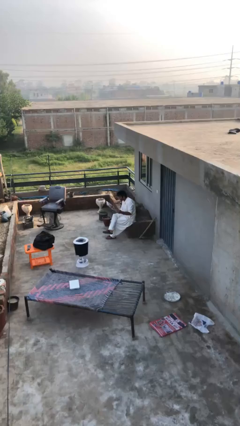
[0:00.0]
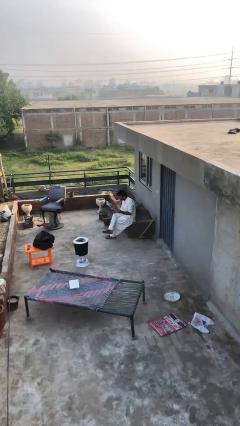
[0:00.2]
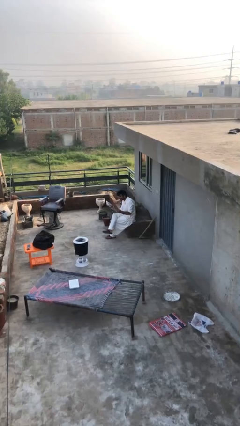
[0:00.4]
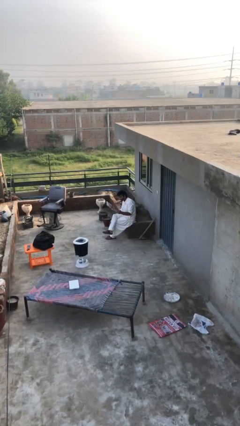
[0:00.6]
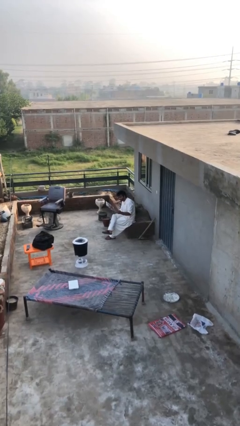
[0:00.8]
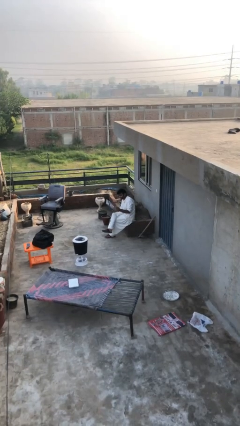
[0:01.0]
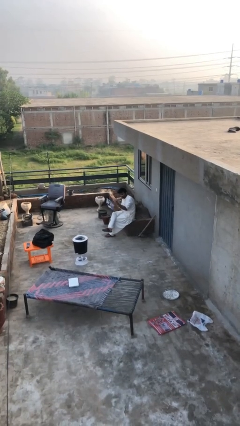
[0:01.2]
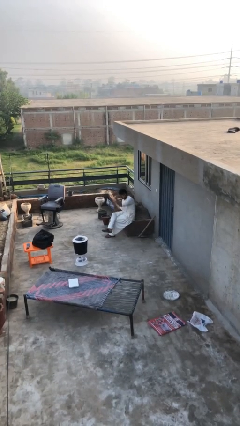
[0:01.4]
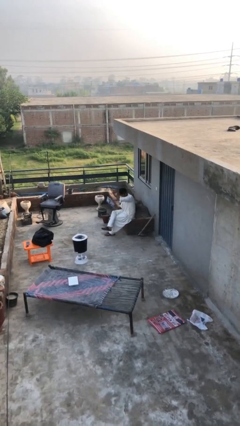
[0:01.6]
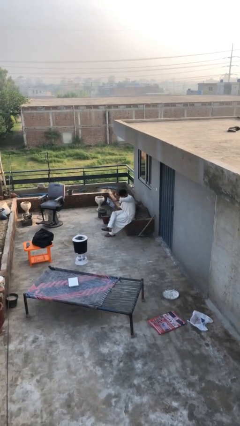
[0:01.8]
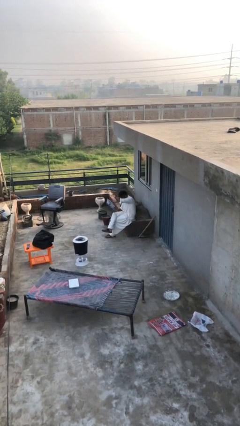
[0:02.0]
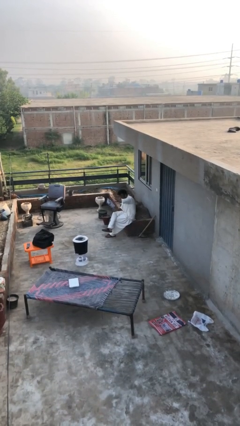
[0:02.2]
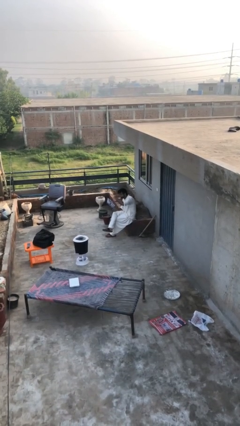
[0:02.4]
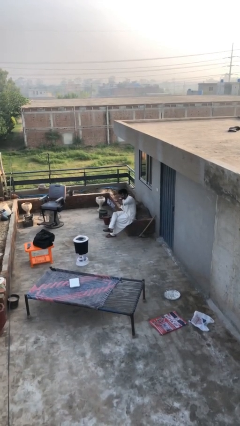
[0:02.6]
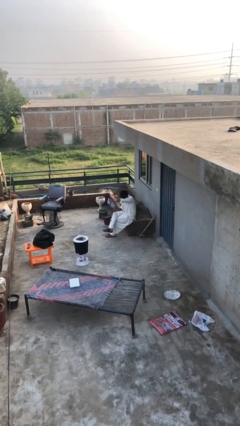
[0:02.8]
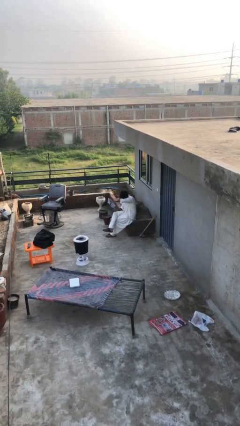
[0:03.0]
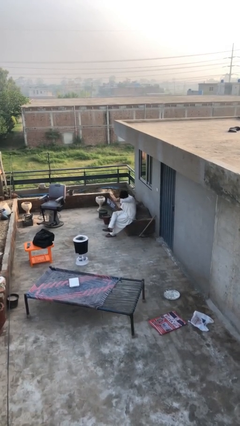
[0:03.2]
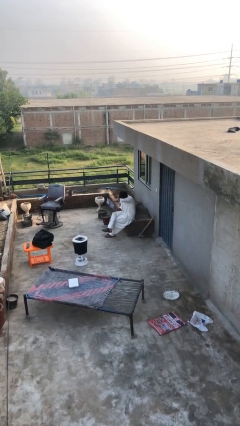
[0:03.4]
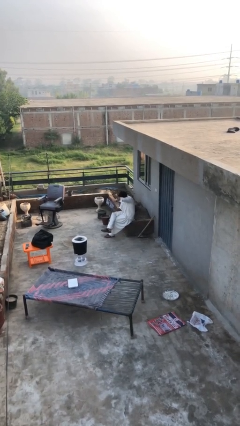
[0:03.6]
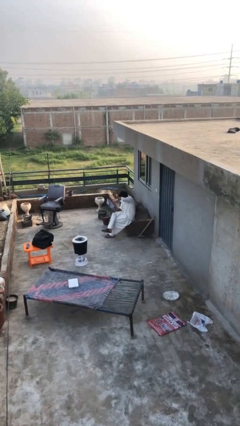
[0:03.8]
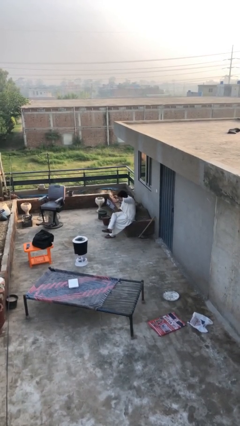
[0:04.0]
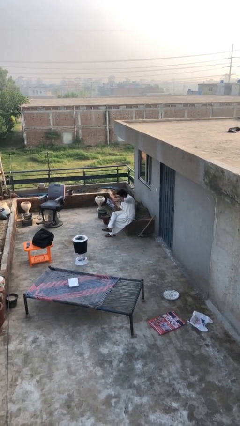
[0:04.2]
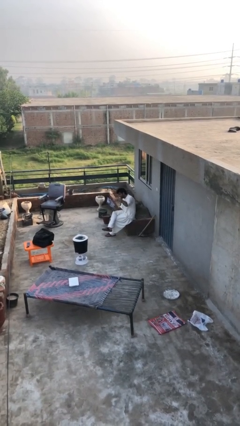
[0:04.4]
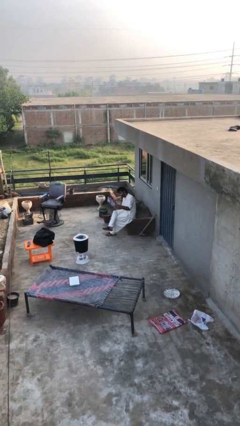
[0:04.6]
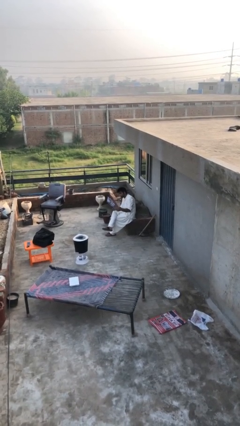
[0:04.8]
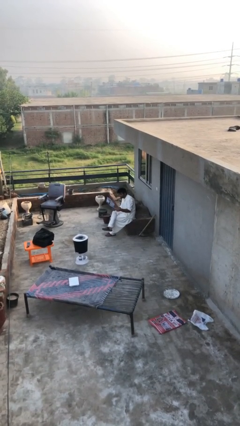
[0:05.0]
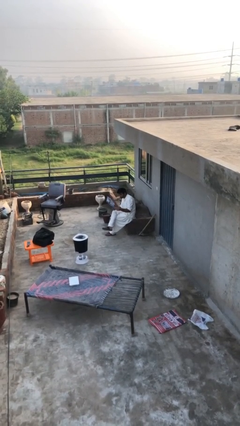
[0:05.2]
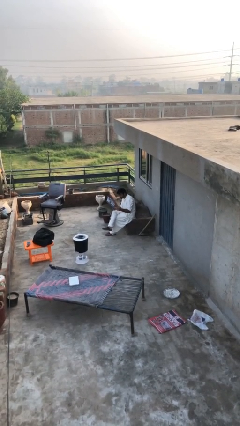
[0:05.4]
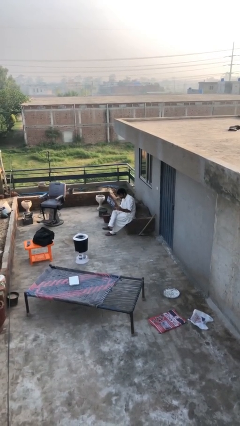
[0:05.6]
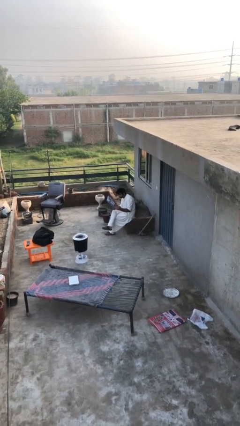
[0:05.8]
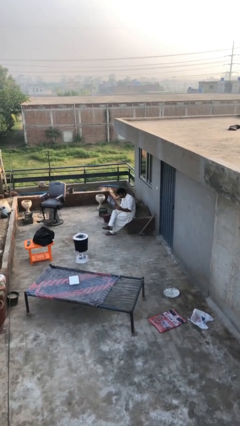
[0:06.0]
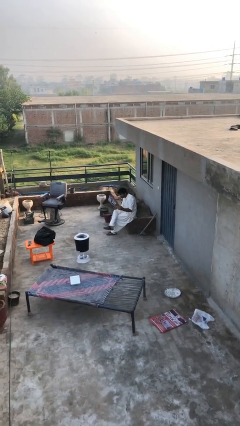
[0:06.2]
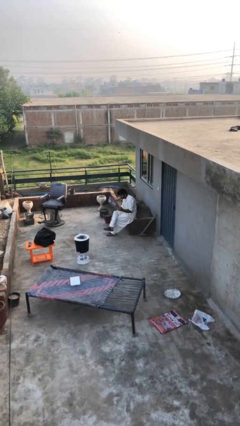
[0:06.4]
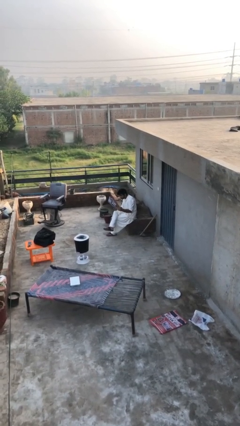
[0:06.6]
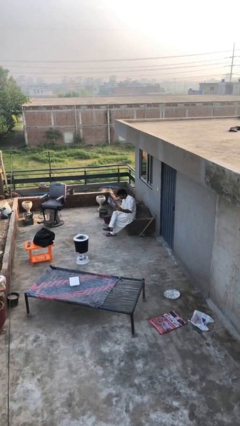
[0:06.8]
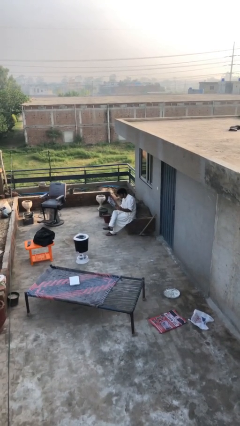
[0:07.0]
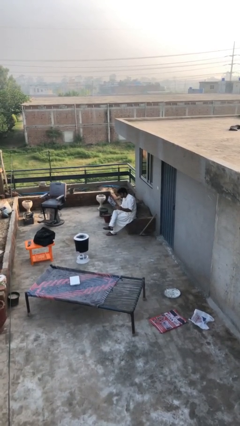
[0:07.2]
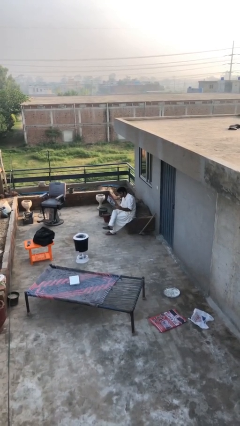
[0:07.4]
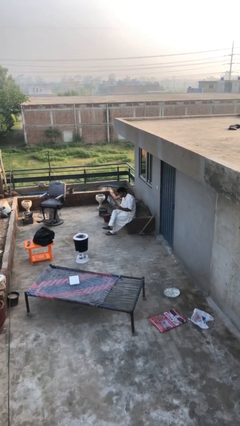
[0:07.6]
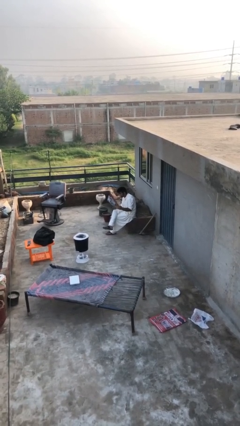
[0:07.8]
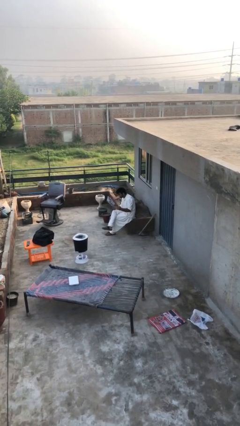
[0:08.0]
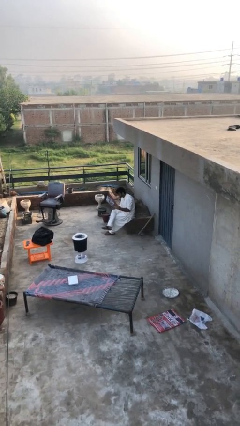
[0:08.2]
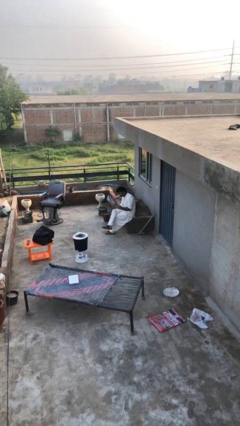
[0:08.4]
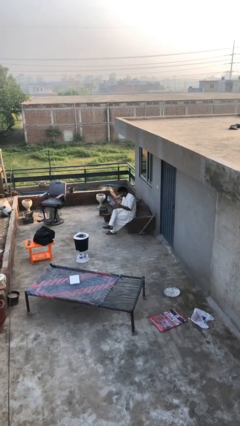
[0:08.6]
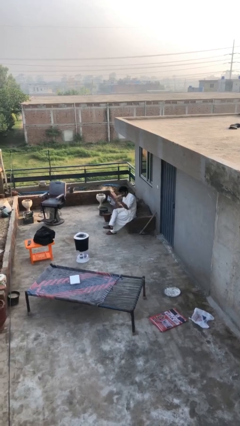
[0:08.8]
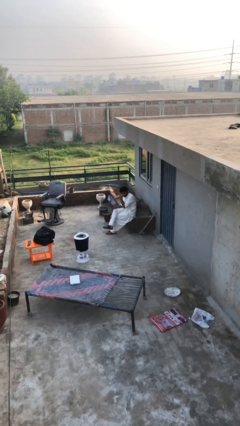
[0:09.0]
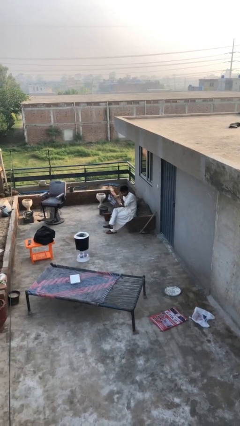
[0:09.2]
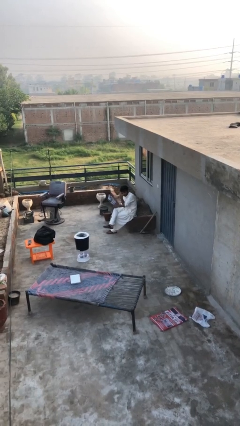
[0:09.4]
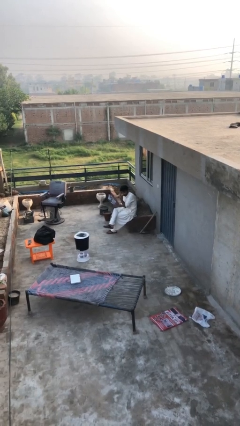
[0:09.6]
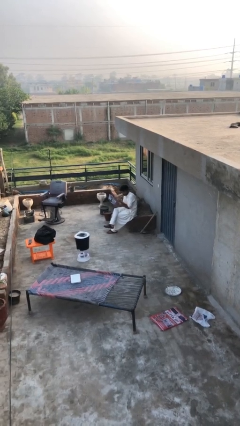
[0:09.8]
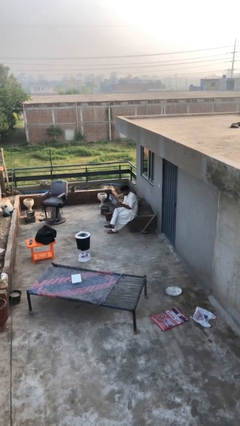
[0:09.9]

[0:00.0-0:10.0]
person reads document

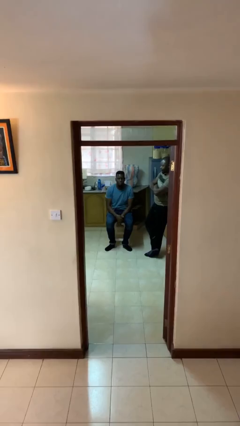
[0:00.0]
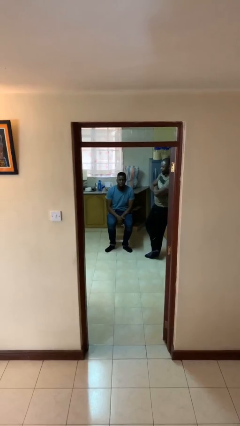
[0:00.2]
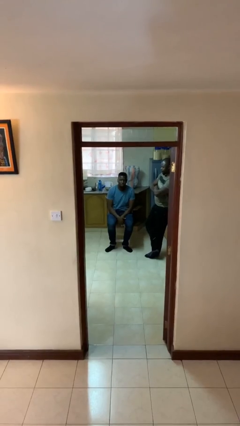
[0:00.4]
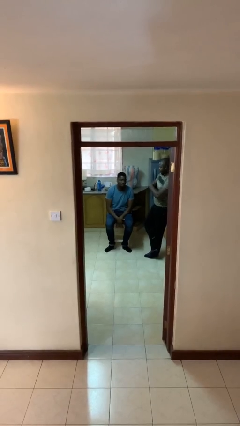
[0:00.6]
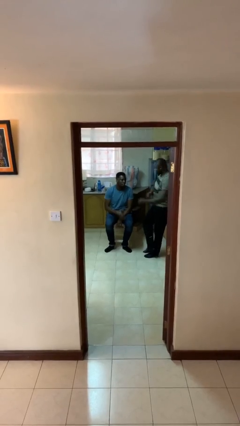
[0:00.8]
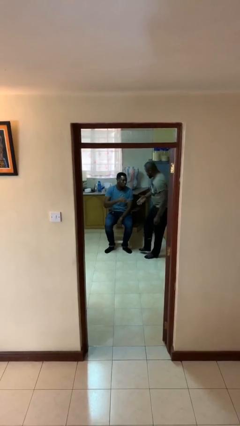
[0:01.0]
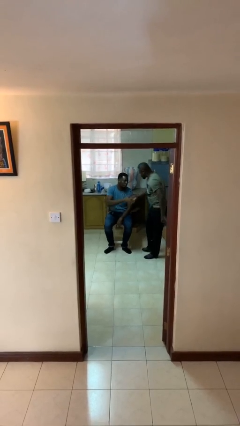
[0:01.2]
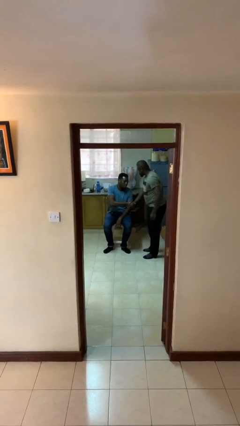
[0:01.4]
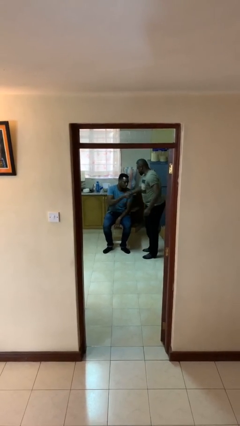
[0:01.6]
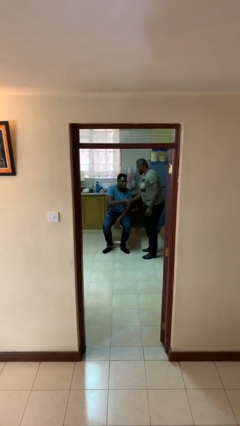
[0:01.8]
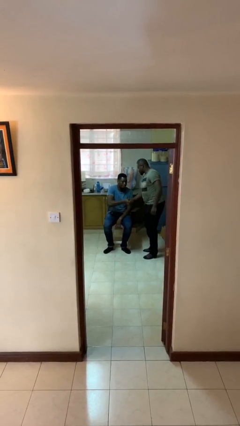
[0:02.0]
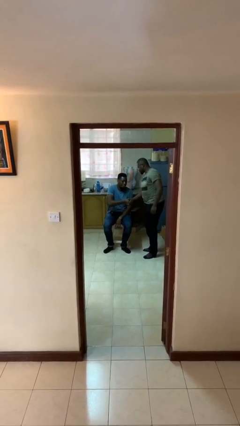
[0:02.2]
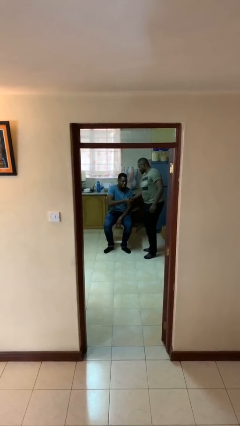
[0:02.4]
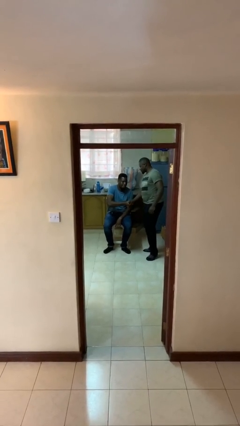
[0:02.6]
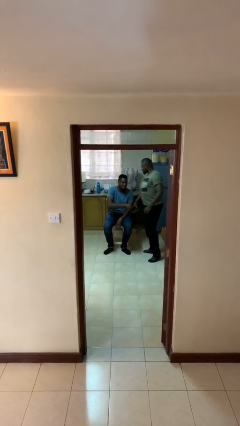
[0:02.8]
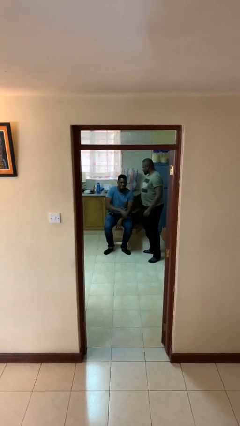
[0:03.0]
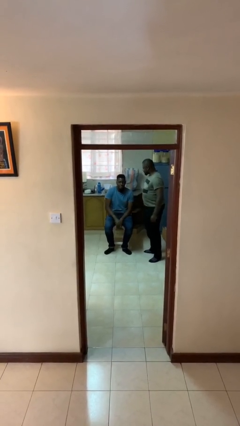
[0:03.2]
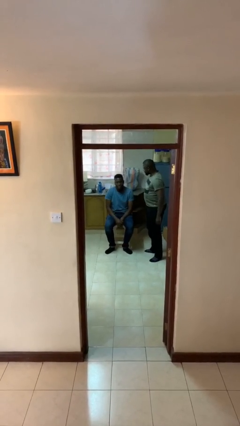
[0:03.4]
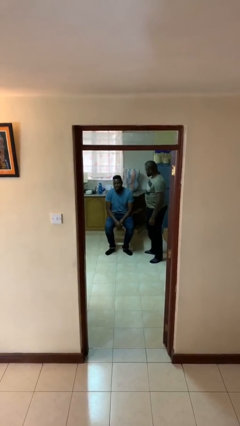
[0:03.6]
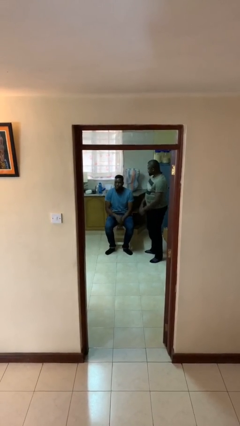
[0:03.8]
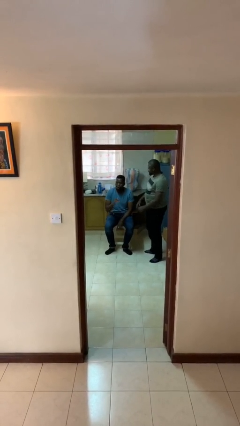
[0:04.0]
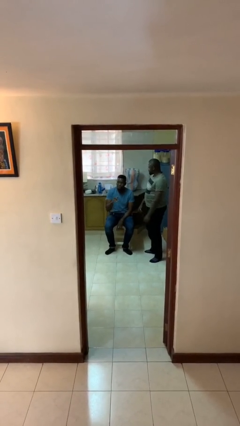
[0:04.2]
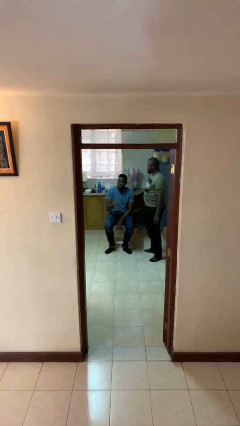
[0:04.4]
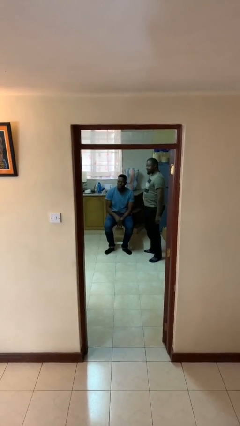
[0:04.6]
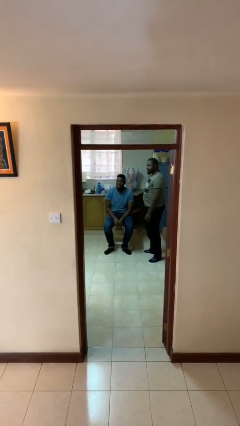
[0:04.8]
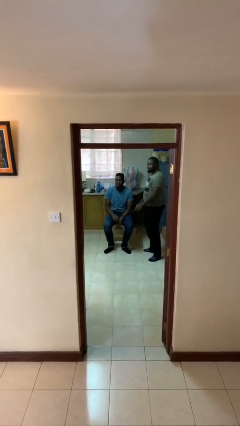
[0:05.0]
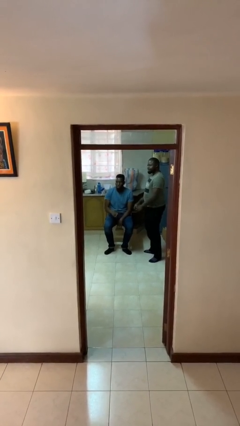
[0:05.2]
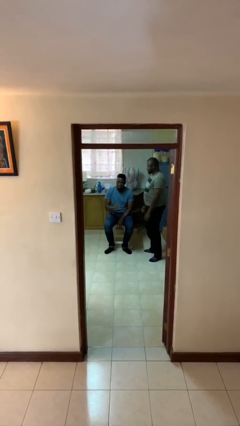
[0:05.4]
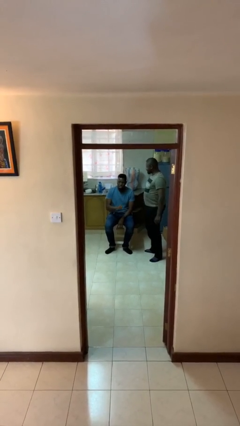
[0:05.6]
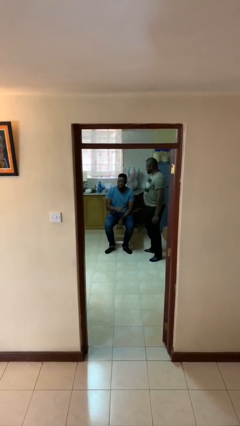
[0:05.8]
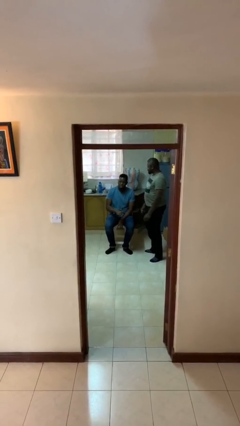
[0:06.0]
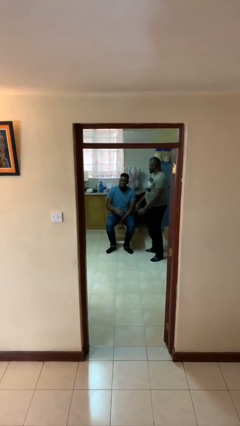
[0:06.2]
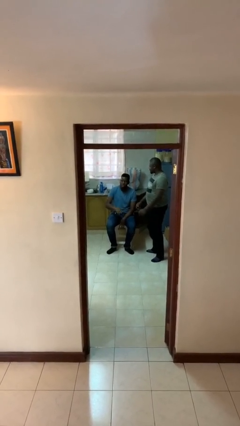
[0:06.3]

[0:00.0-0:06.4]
person shakes hand

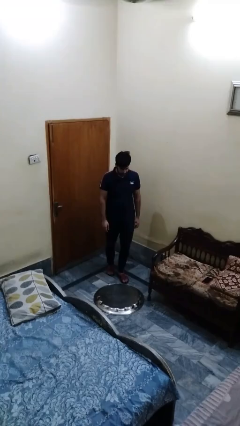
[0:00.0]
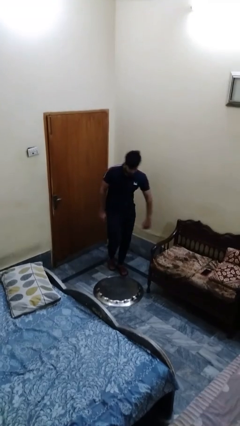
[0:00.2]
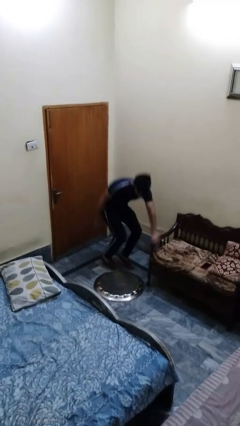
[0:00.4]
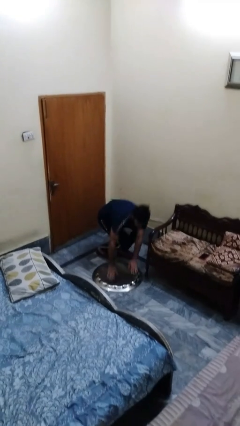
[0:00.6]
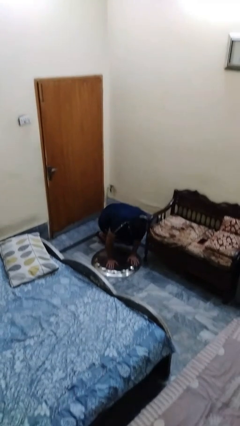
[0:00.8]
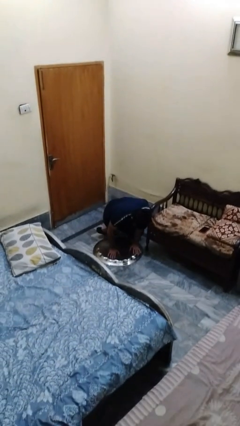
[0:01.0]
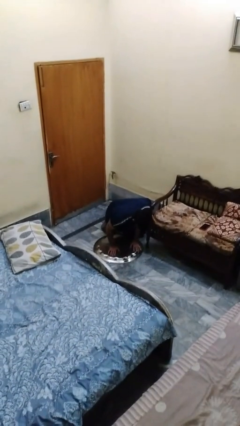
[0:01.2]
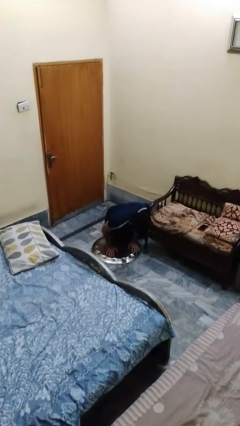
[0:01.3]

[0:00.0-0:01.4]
person trips on object on floor
